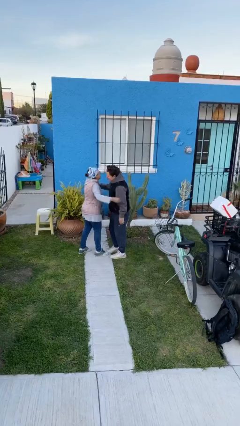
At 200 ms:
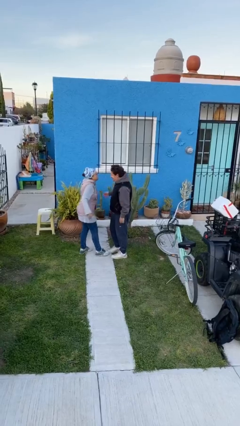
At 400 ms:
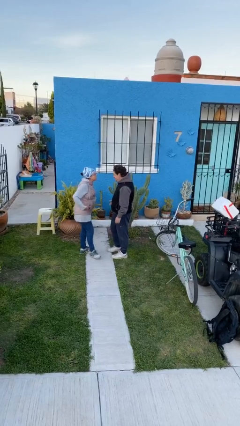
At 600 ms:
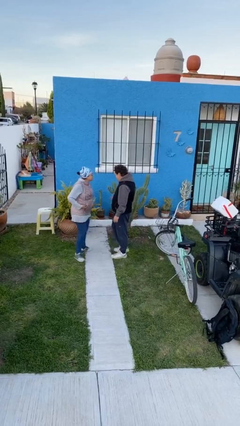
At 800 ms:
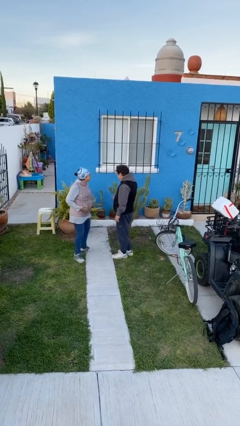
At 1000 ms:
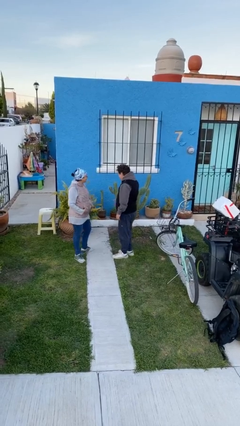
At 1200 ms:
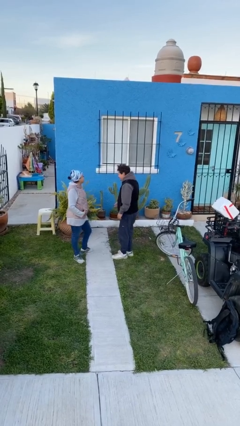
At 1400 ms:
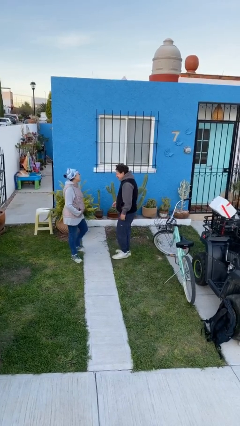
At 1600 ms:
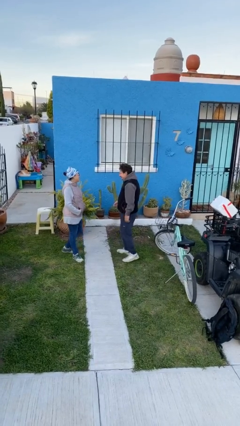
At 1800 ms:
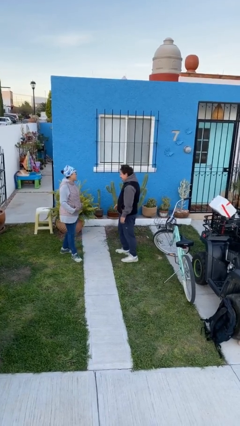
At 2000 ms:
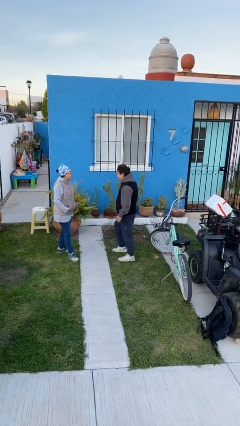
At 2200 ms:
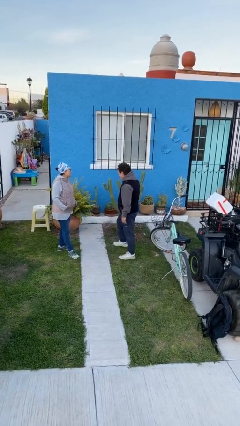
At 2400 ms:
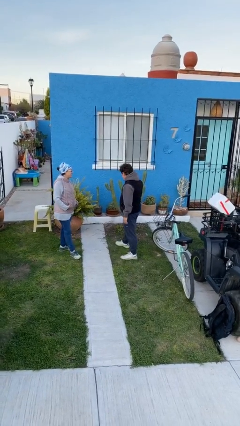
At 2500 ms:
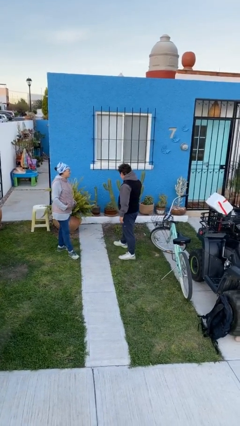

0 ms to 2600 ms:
person talks to person

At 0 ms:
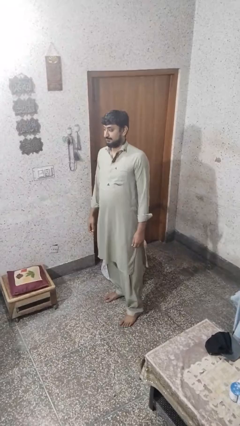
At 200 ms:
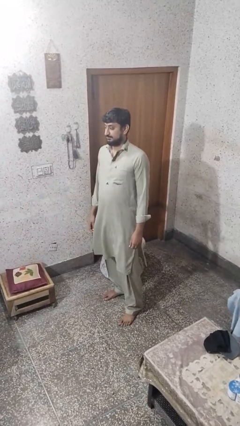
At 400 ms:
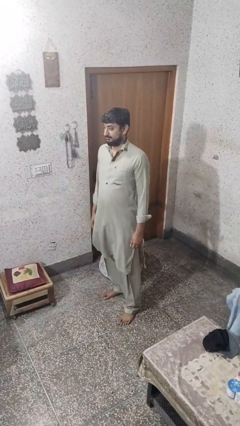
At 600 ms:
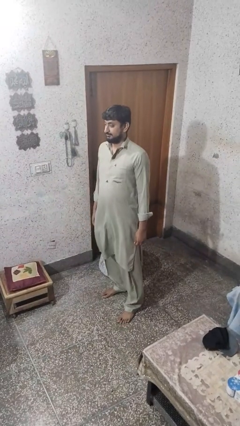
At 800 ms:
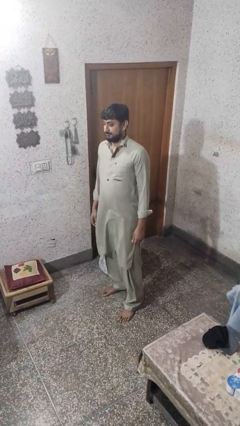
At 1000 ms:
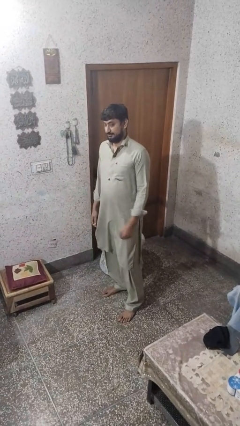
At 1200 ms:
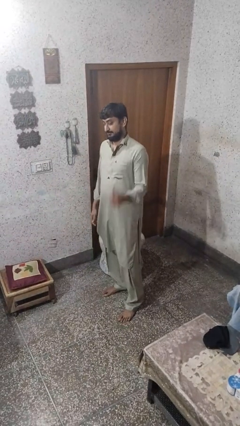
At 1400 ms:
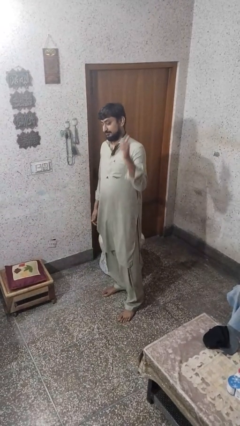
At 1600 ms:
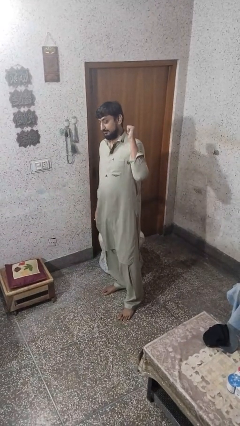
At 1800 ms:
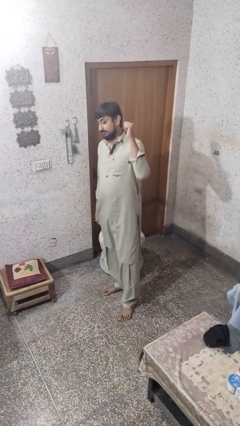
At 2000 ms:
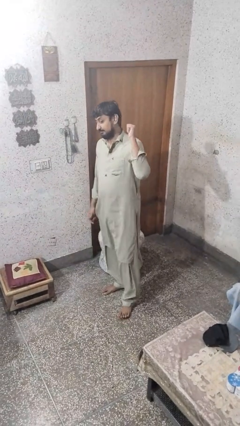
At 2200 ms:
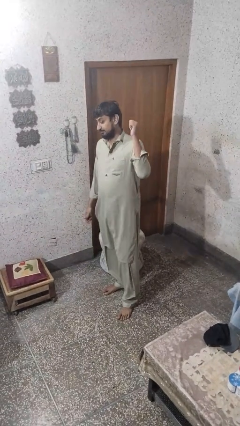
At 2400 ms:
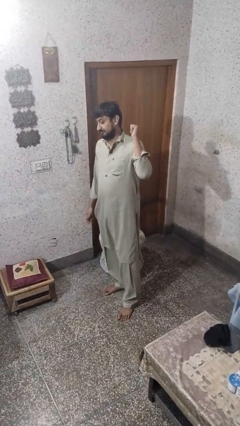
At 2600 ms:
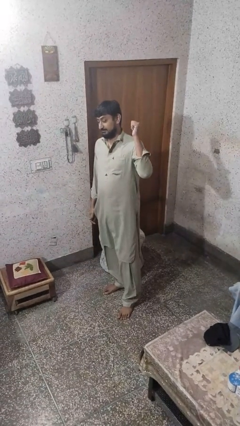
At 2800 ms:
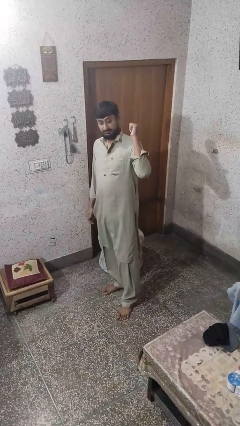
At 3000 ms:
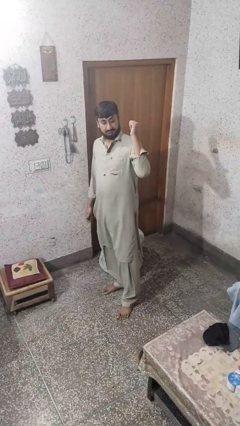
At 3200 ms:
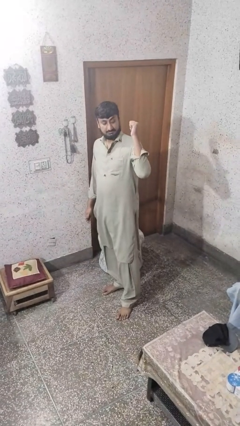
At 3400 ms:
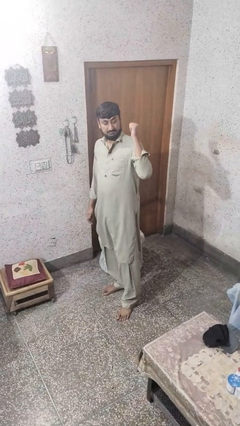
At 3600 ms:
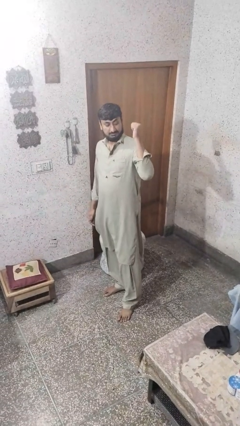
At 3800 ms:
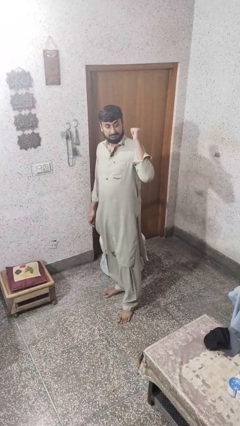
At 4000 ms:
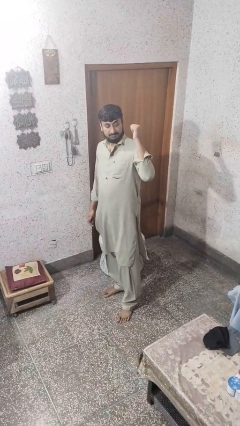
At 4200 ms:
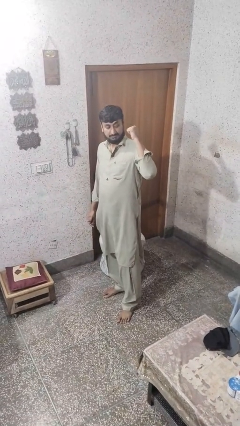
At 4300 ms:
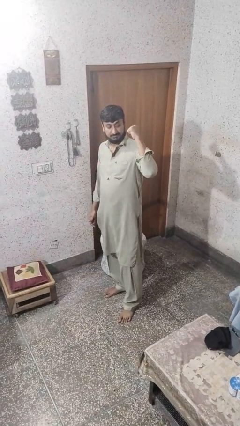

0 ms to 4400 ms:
person gestures behind me

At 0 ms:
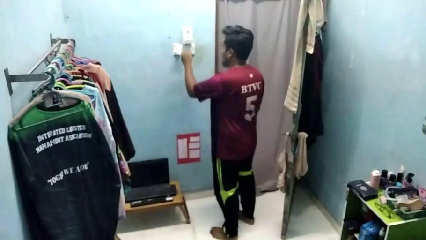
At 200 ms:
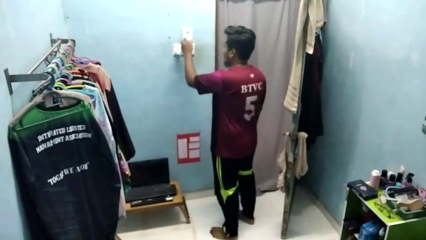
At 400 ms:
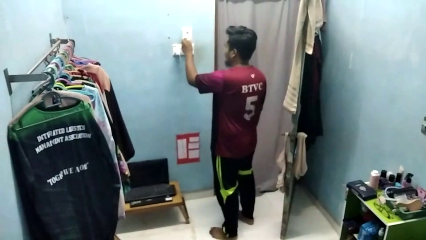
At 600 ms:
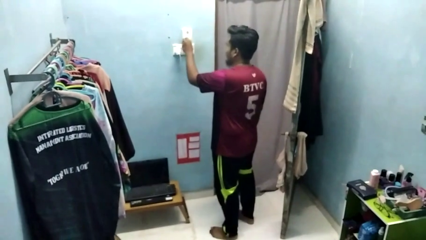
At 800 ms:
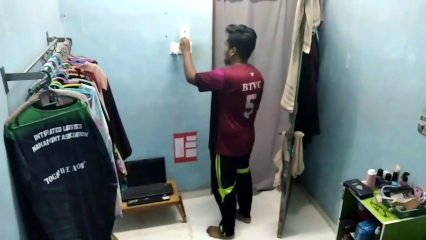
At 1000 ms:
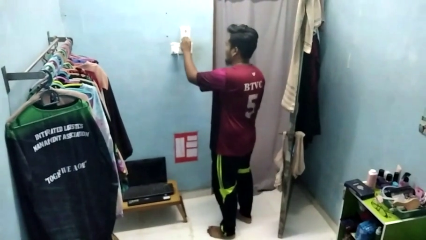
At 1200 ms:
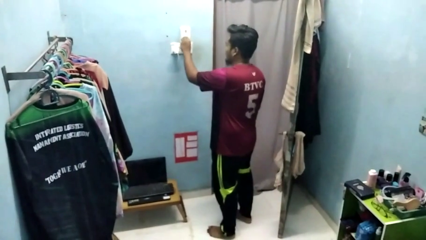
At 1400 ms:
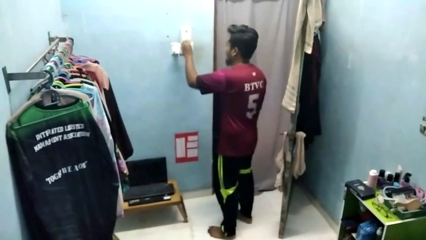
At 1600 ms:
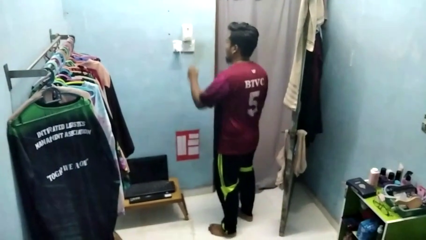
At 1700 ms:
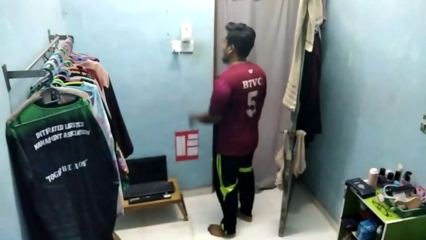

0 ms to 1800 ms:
person adjusts thermostat

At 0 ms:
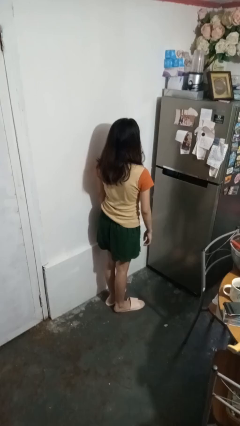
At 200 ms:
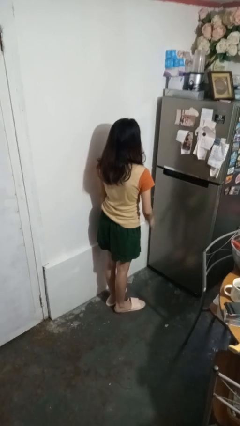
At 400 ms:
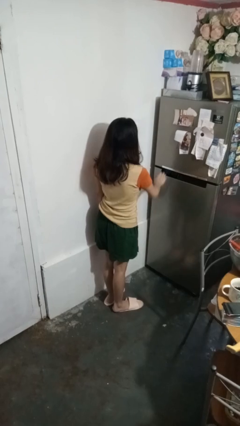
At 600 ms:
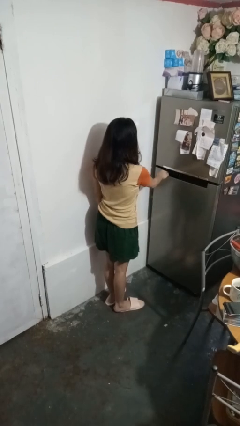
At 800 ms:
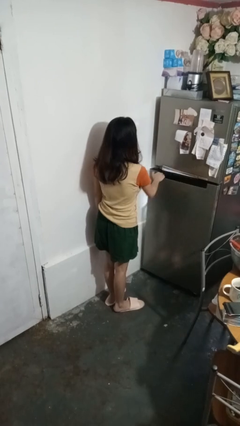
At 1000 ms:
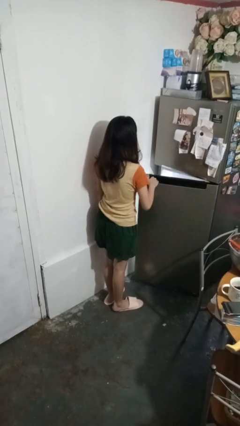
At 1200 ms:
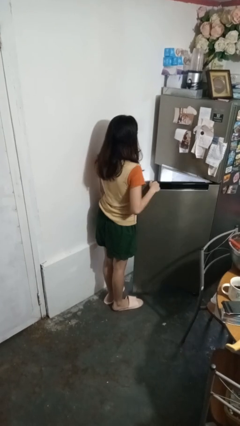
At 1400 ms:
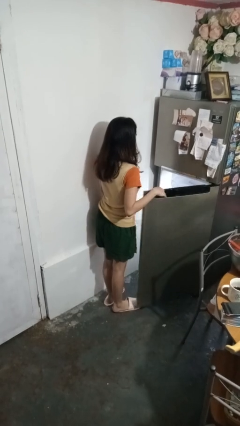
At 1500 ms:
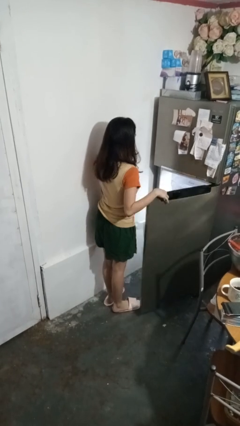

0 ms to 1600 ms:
person opens refrigerator

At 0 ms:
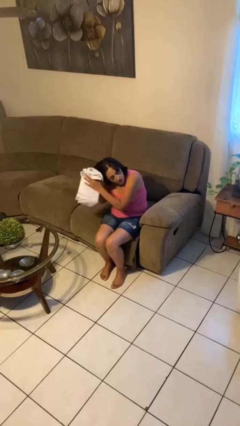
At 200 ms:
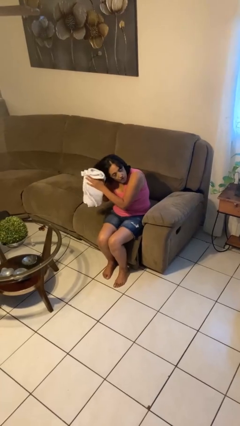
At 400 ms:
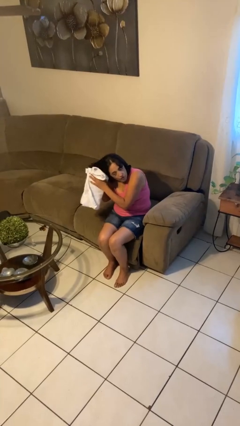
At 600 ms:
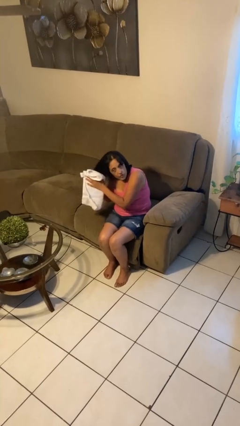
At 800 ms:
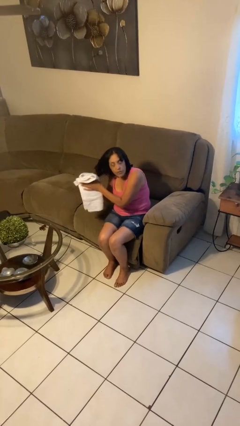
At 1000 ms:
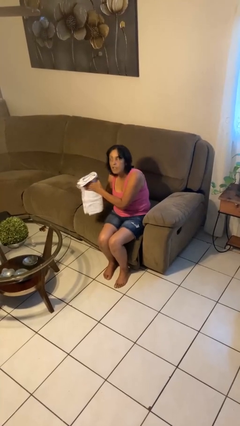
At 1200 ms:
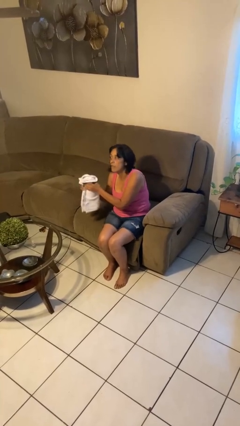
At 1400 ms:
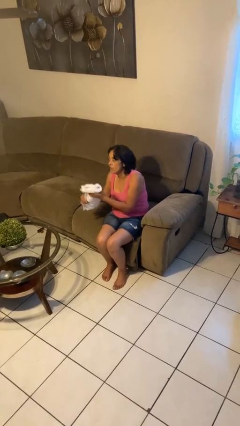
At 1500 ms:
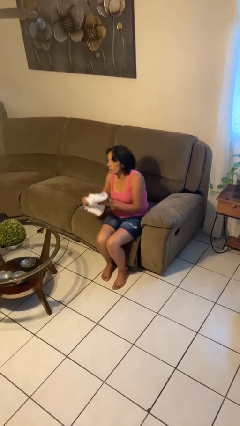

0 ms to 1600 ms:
person dries hair with towel

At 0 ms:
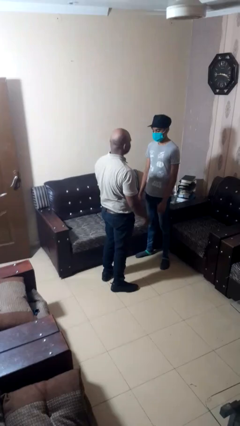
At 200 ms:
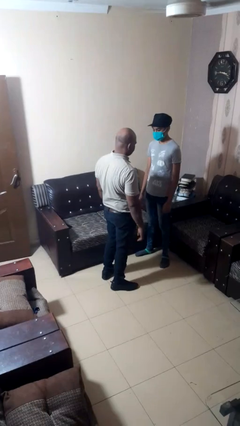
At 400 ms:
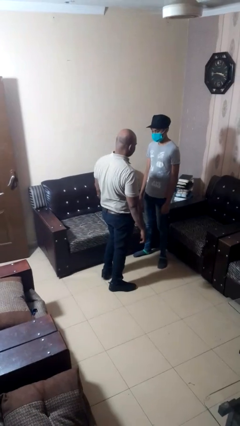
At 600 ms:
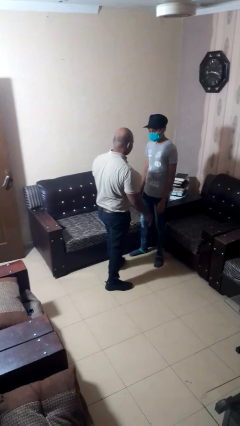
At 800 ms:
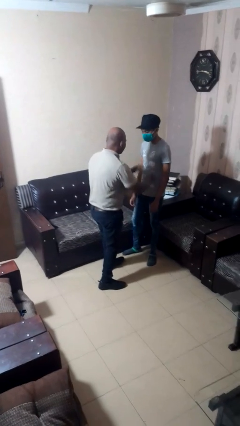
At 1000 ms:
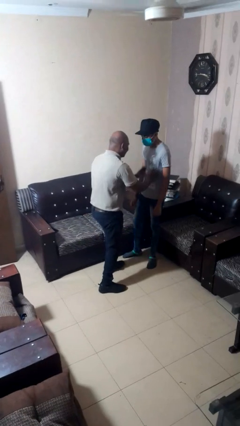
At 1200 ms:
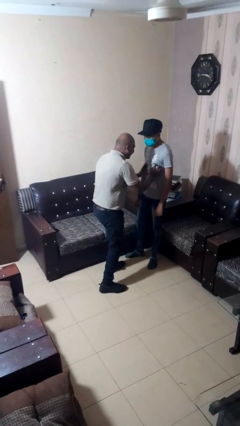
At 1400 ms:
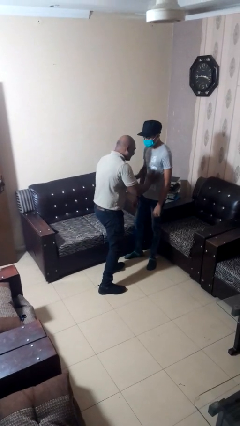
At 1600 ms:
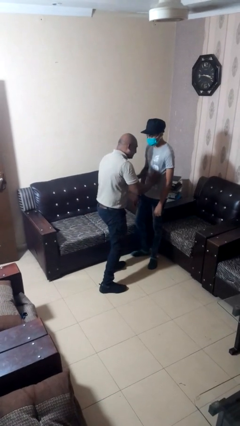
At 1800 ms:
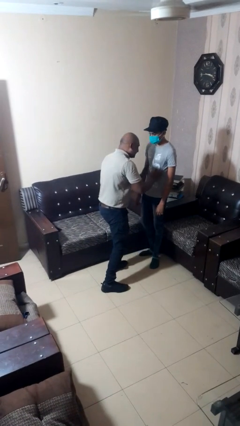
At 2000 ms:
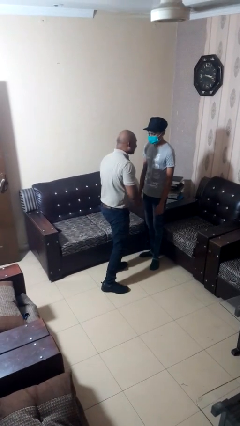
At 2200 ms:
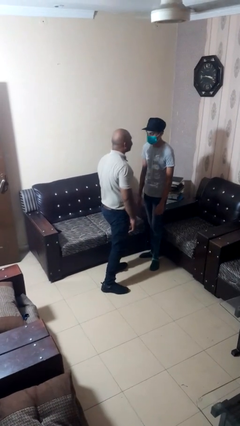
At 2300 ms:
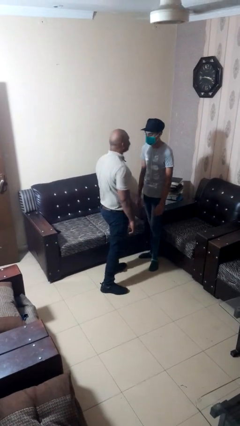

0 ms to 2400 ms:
person tickles person

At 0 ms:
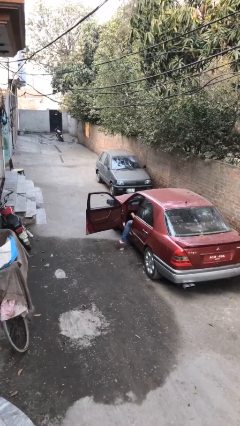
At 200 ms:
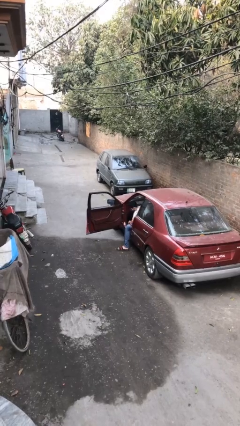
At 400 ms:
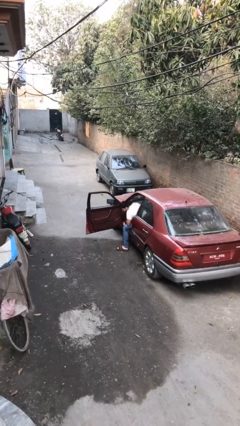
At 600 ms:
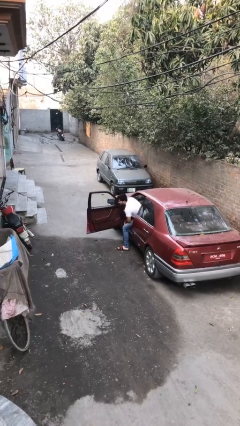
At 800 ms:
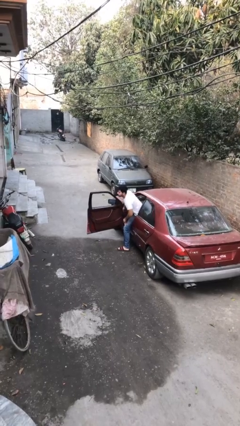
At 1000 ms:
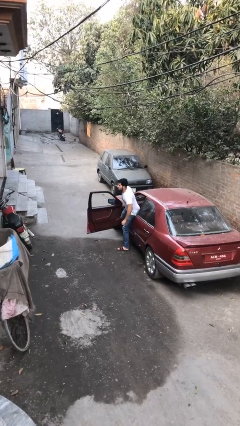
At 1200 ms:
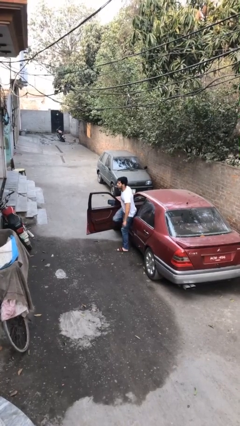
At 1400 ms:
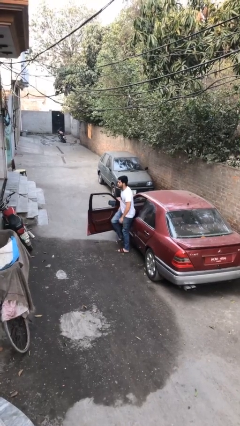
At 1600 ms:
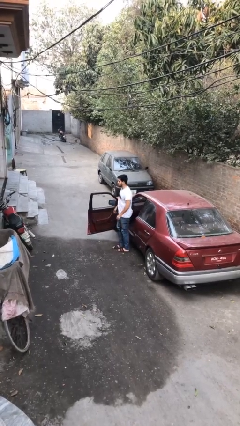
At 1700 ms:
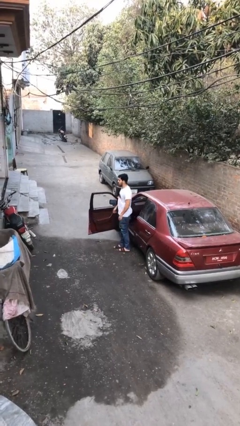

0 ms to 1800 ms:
person exits car

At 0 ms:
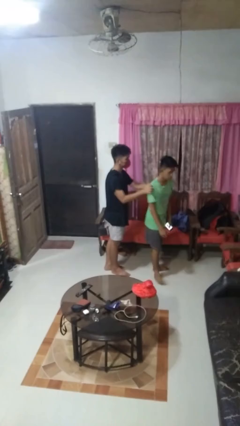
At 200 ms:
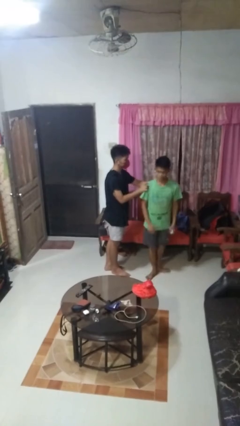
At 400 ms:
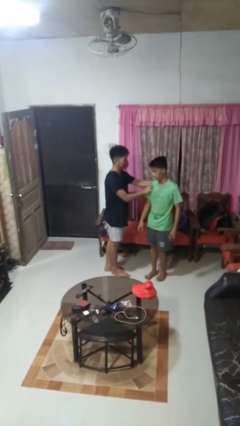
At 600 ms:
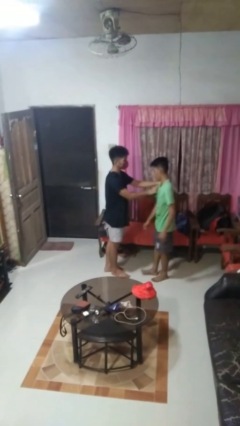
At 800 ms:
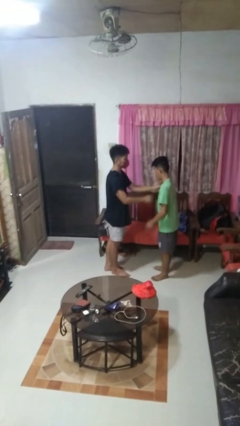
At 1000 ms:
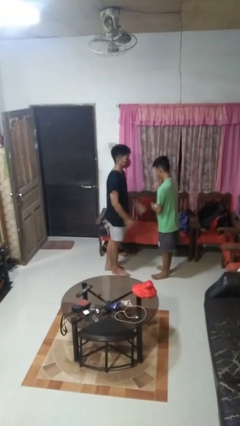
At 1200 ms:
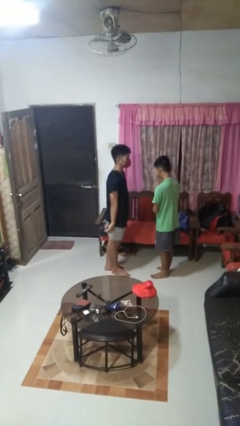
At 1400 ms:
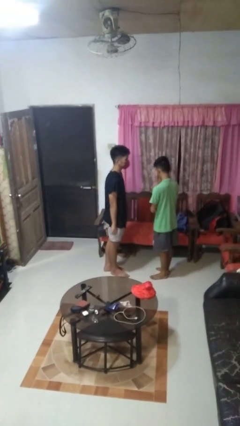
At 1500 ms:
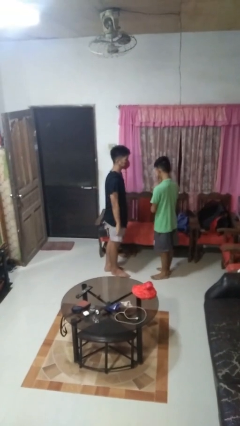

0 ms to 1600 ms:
person spins person around
